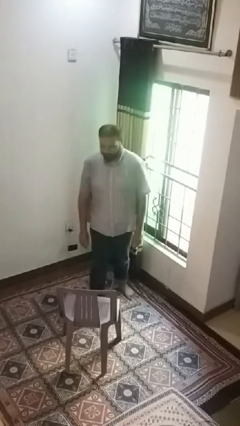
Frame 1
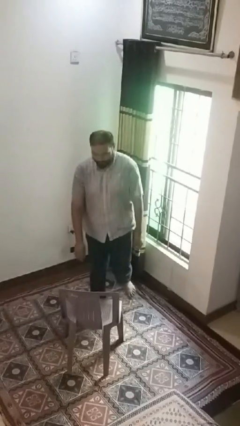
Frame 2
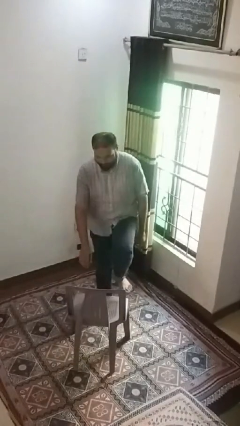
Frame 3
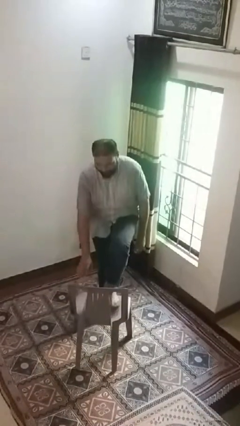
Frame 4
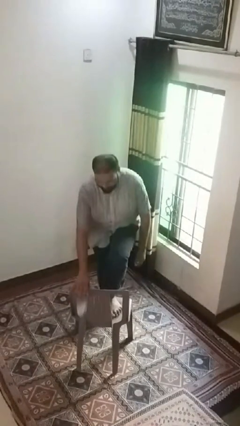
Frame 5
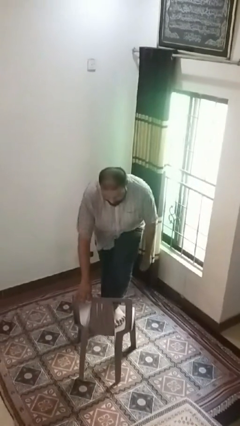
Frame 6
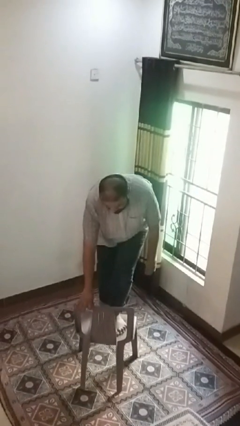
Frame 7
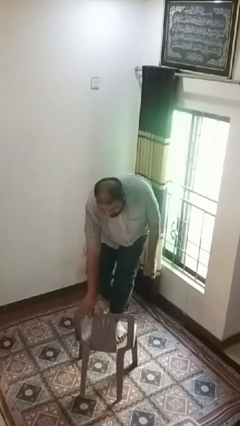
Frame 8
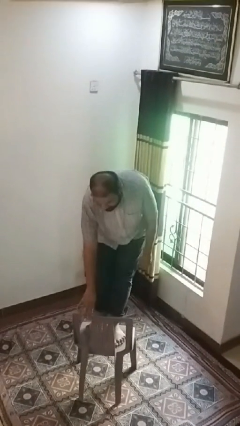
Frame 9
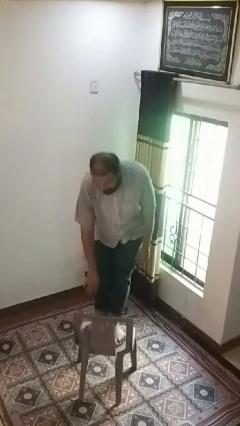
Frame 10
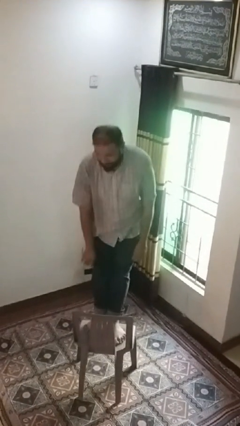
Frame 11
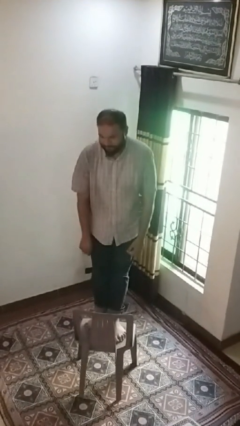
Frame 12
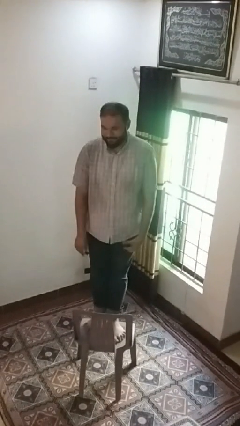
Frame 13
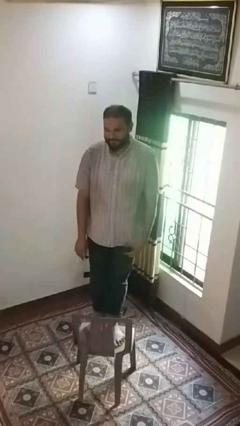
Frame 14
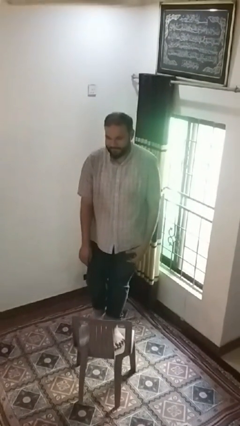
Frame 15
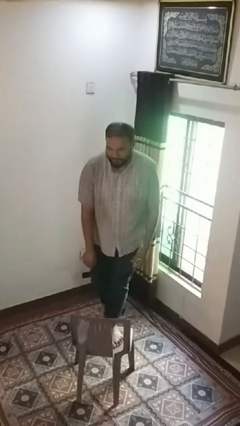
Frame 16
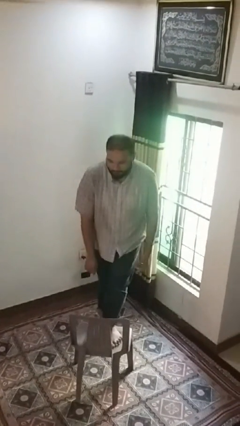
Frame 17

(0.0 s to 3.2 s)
person climbs on chair

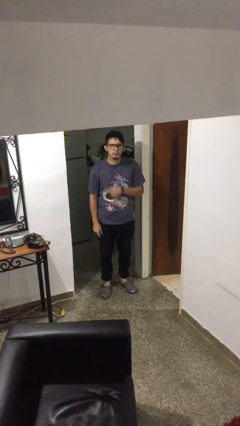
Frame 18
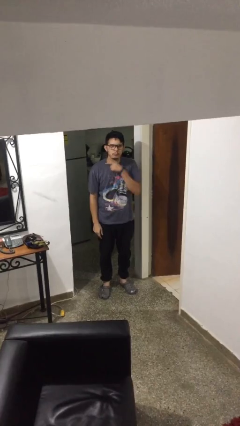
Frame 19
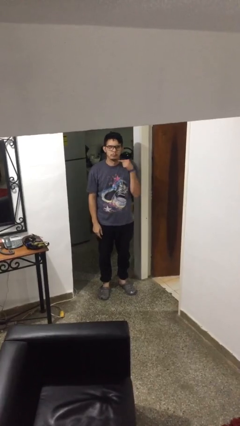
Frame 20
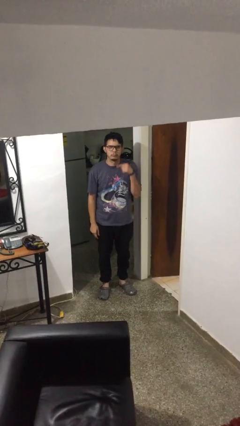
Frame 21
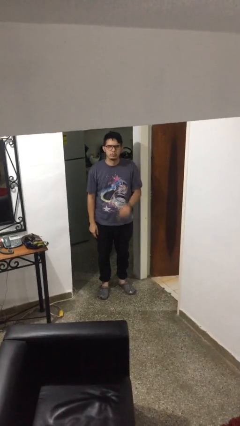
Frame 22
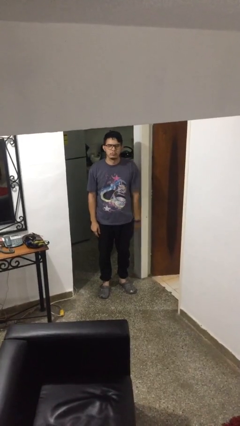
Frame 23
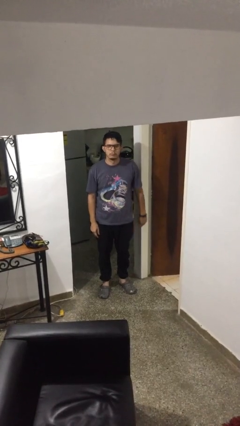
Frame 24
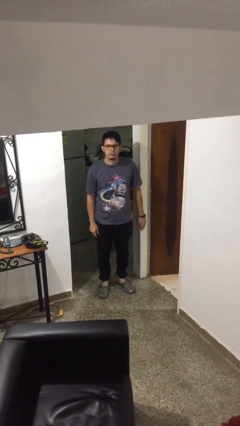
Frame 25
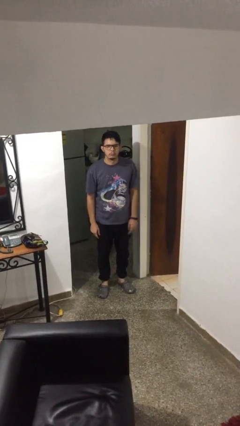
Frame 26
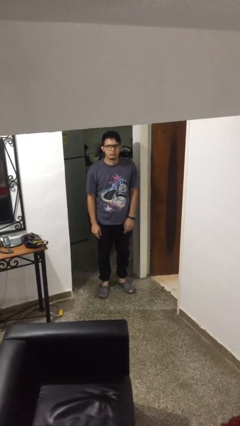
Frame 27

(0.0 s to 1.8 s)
person gestures cut

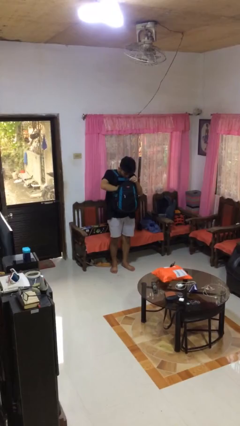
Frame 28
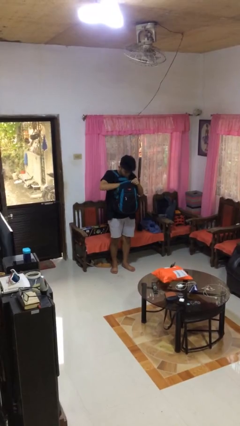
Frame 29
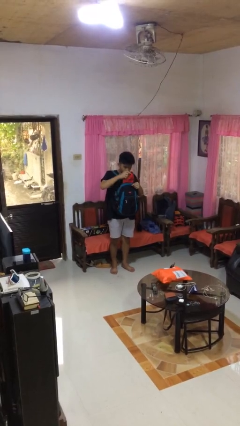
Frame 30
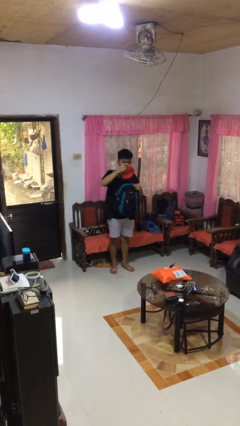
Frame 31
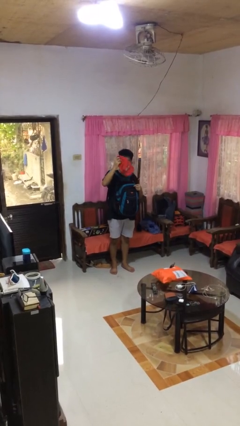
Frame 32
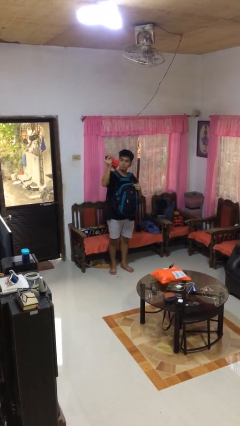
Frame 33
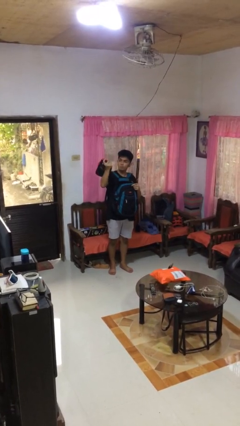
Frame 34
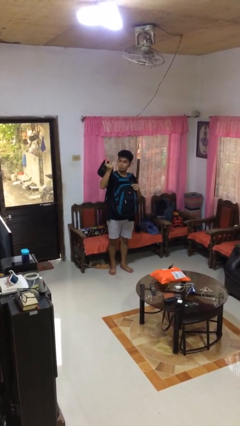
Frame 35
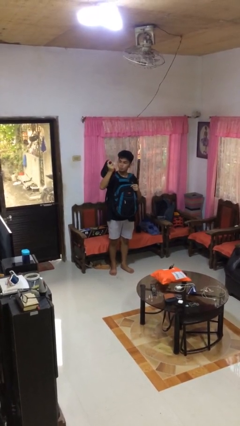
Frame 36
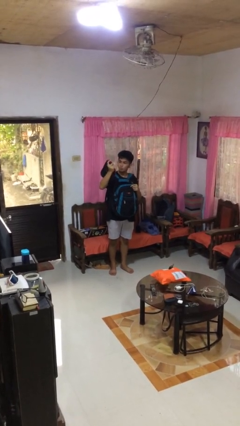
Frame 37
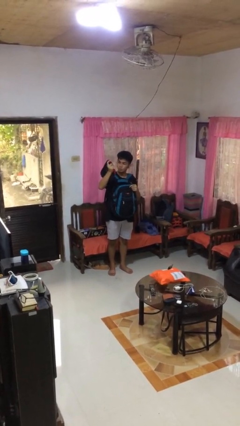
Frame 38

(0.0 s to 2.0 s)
person takes object from backpack

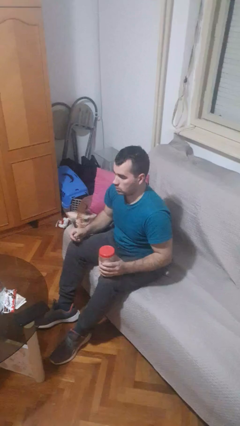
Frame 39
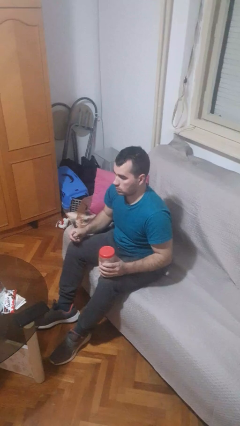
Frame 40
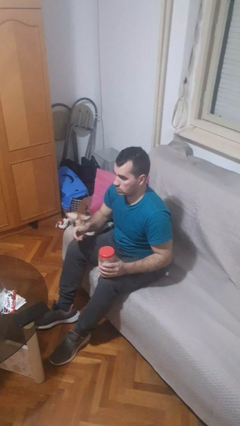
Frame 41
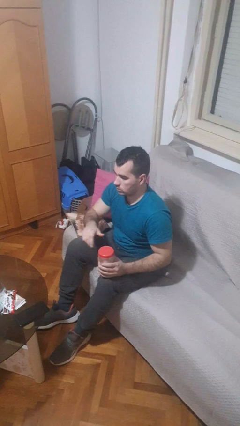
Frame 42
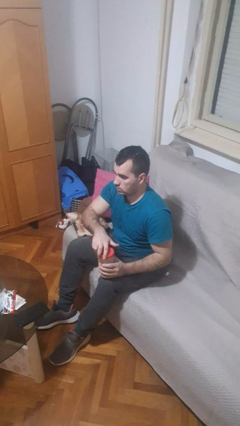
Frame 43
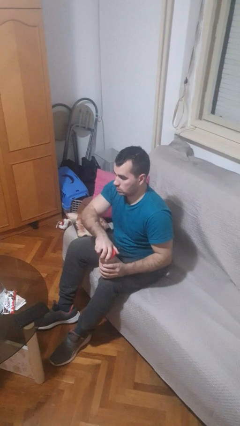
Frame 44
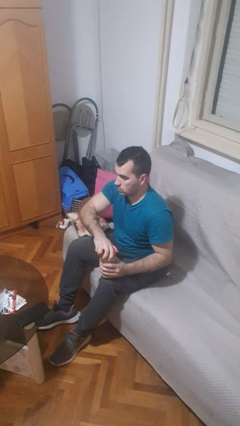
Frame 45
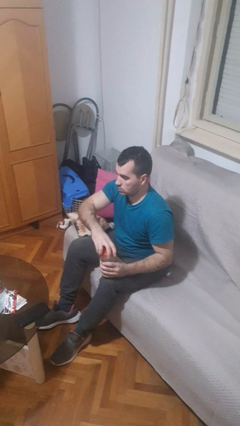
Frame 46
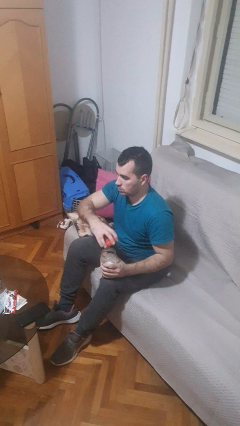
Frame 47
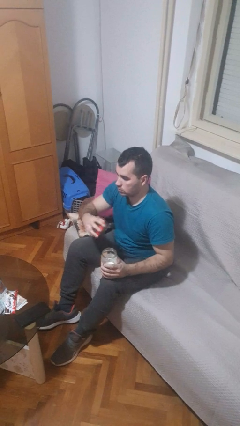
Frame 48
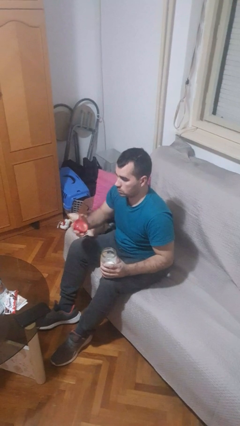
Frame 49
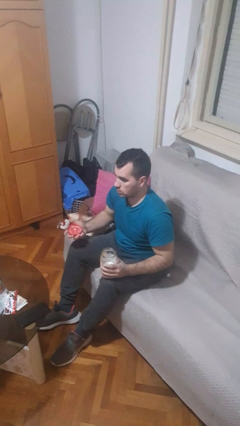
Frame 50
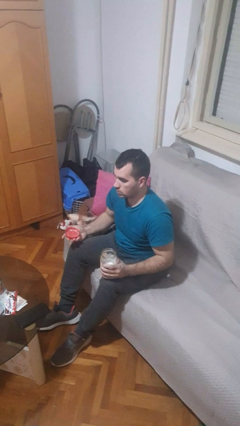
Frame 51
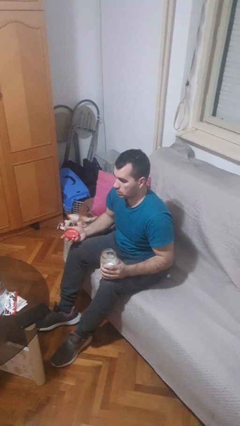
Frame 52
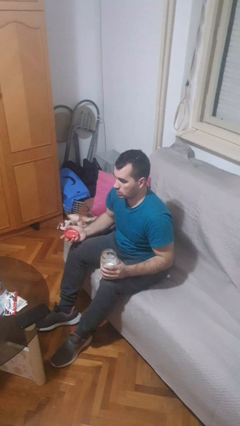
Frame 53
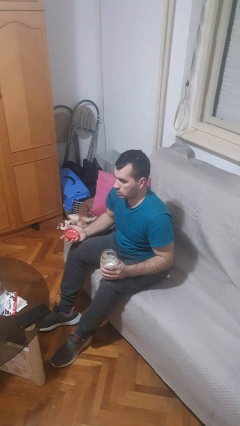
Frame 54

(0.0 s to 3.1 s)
person opens jar

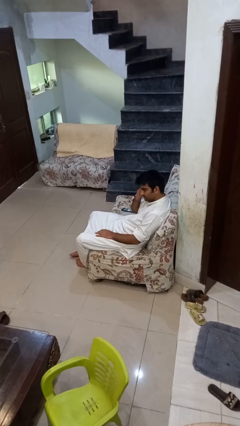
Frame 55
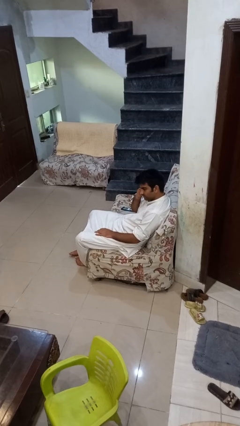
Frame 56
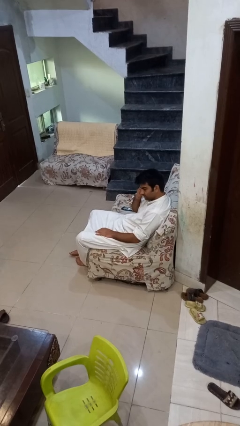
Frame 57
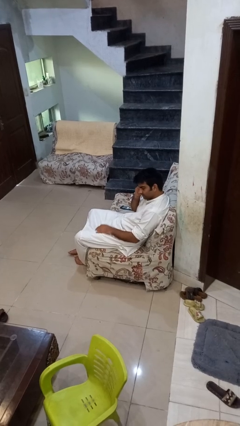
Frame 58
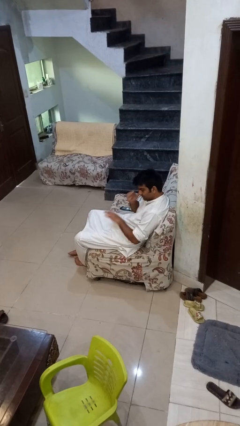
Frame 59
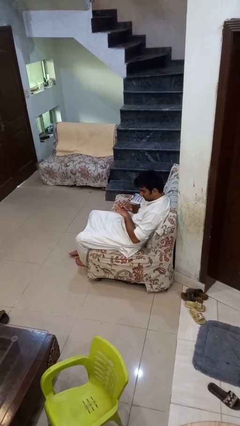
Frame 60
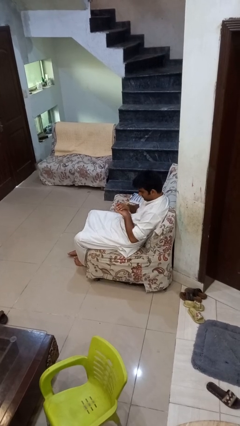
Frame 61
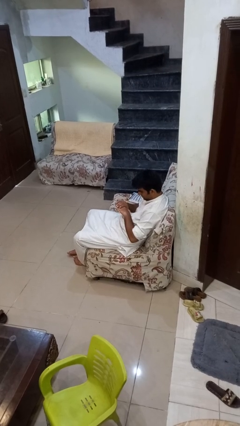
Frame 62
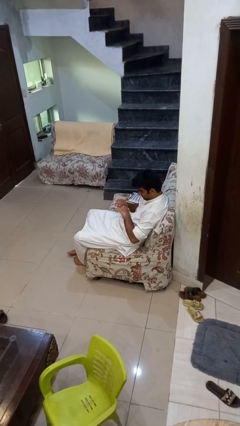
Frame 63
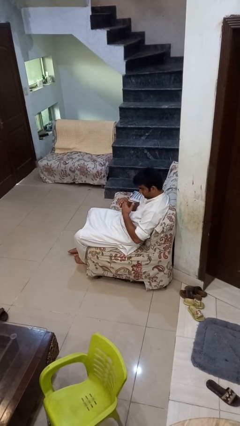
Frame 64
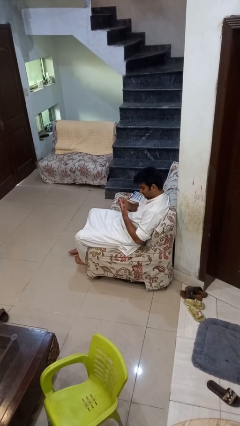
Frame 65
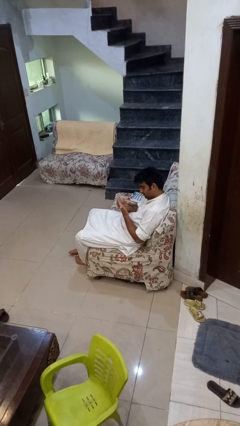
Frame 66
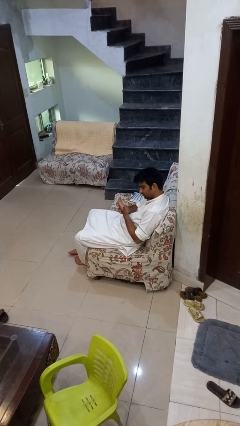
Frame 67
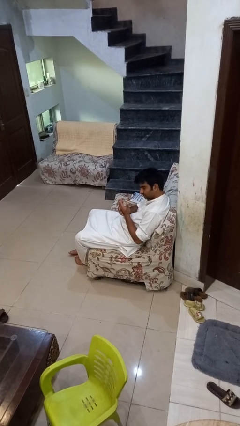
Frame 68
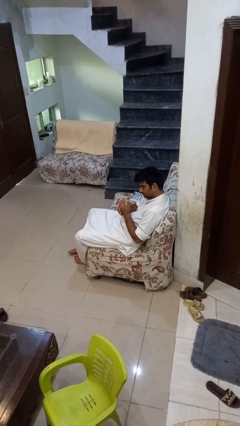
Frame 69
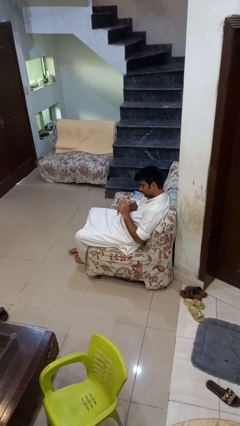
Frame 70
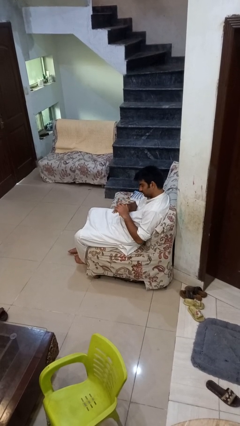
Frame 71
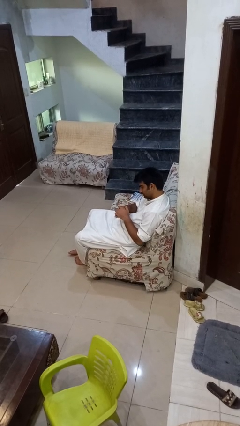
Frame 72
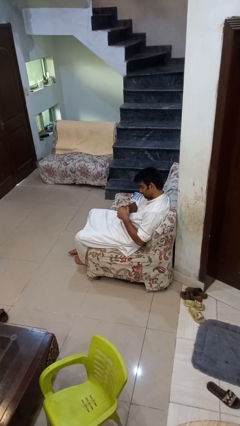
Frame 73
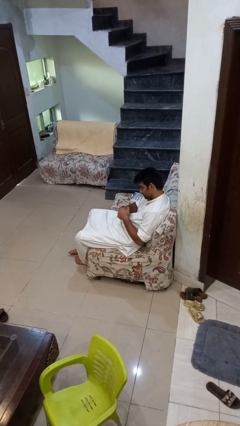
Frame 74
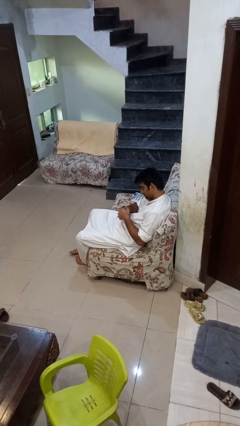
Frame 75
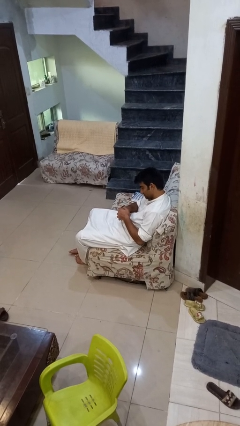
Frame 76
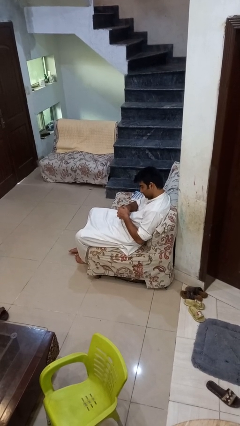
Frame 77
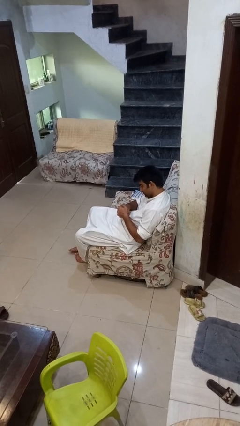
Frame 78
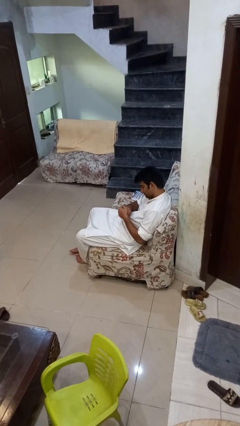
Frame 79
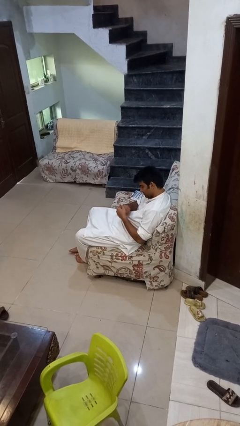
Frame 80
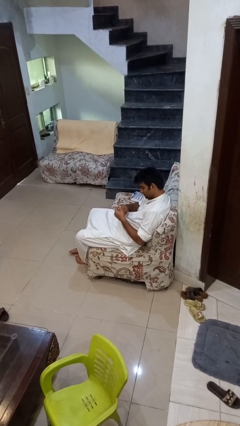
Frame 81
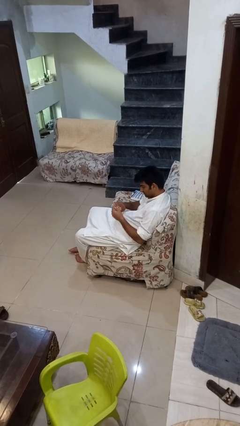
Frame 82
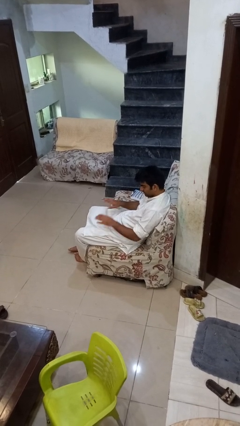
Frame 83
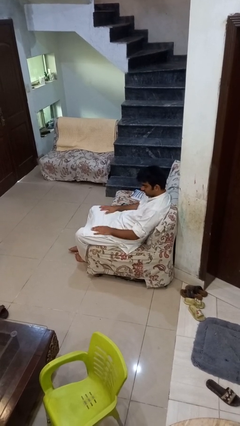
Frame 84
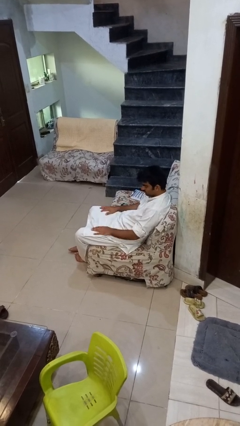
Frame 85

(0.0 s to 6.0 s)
person looks at hands in lap

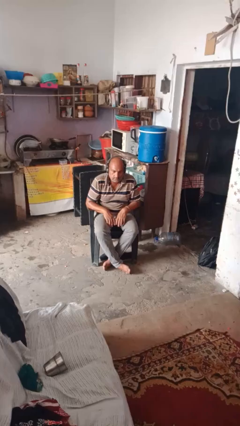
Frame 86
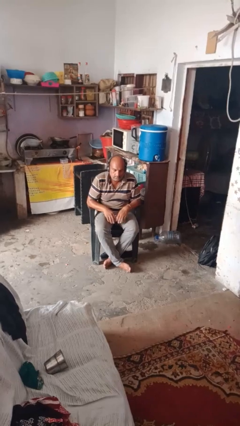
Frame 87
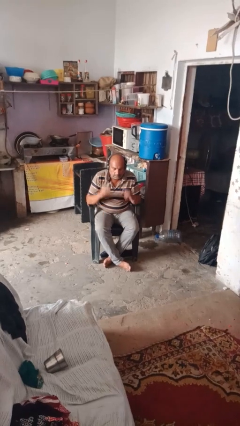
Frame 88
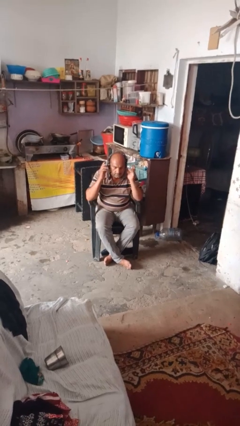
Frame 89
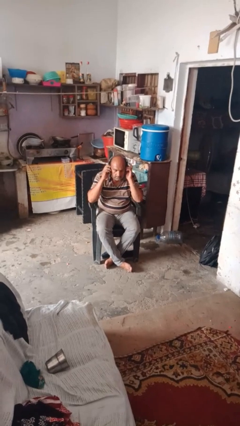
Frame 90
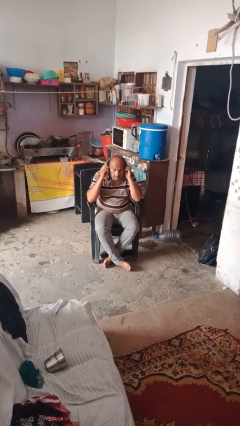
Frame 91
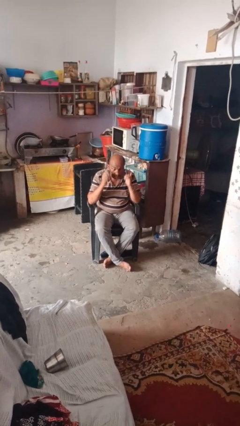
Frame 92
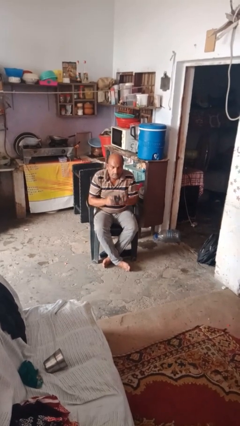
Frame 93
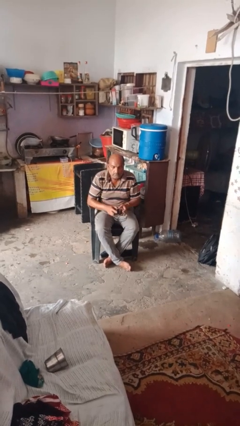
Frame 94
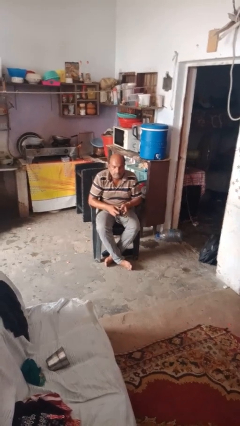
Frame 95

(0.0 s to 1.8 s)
person takes off headphones
